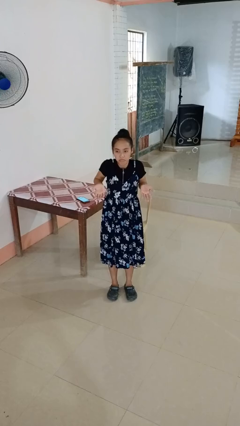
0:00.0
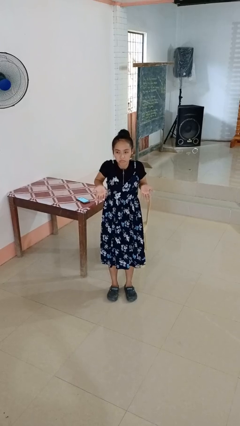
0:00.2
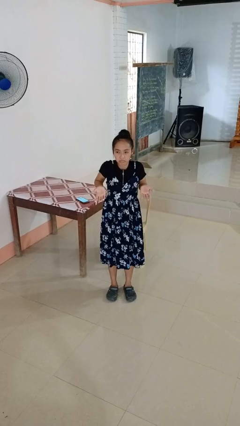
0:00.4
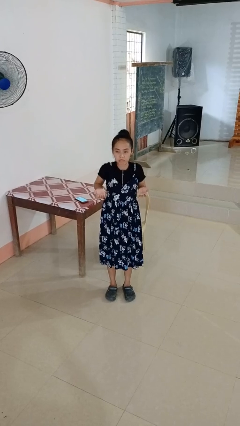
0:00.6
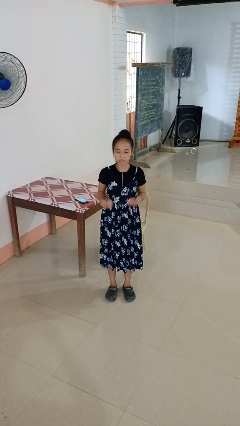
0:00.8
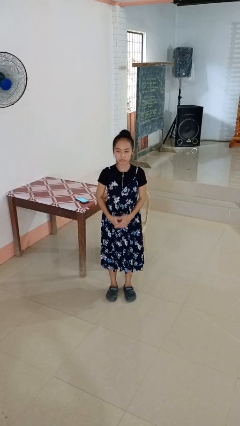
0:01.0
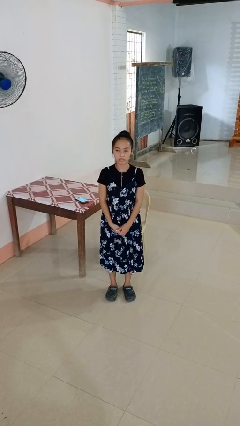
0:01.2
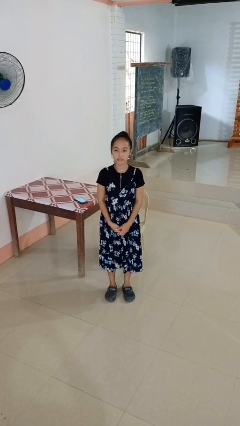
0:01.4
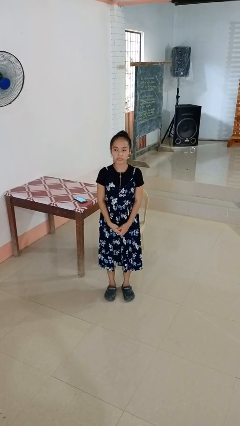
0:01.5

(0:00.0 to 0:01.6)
person shrugs

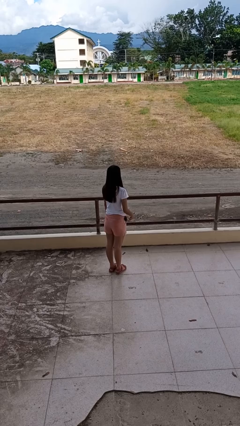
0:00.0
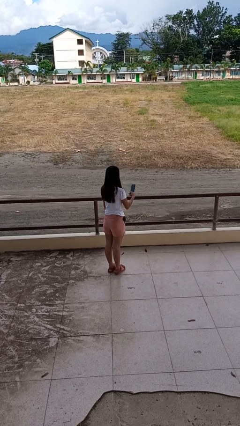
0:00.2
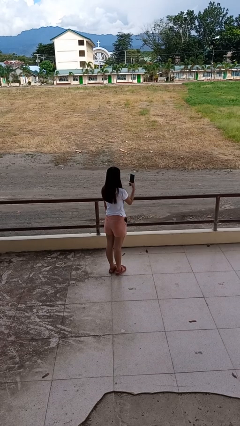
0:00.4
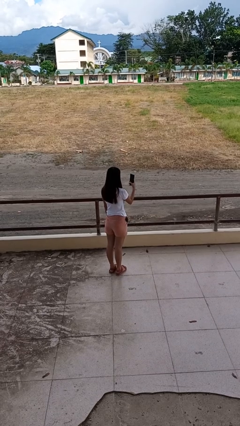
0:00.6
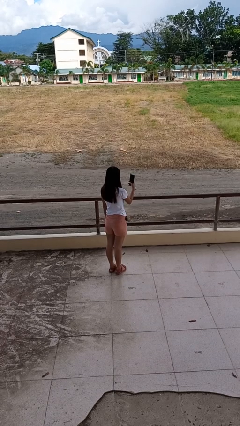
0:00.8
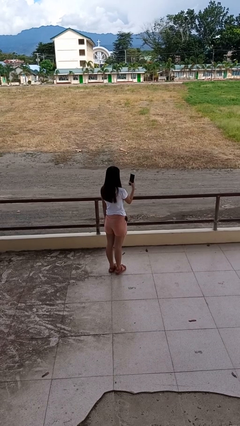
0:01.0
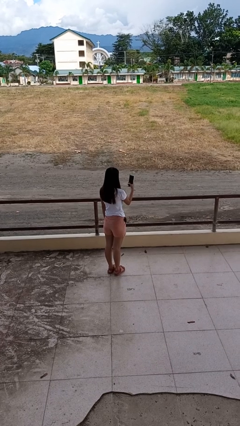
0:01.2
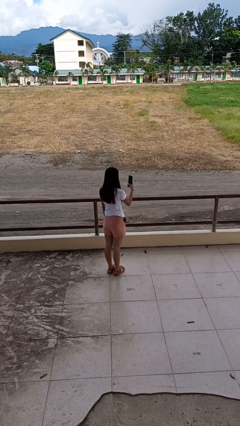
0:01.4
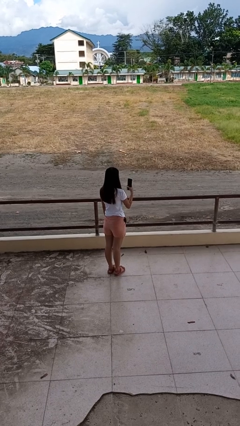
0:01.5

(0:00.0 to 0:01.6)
person takes selfie

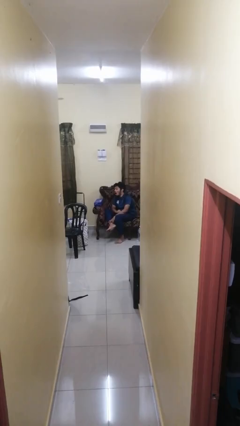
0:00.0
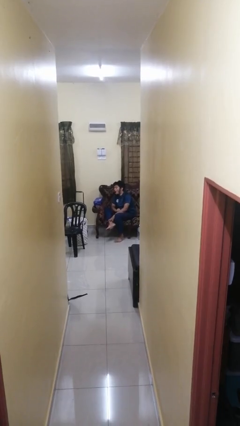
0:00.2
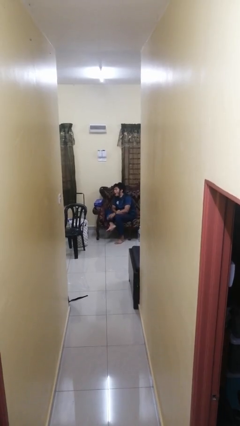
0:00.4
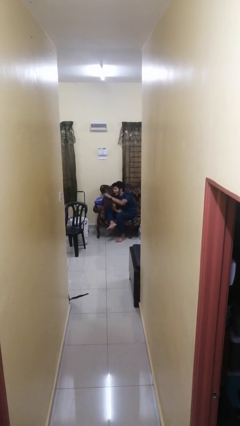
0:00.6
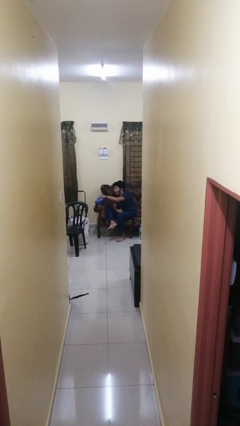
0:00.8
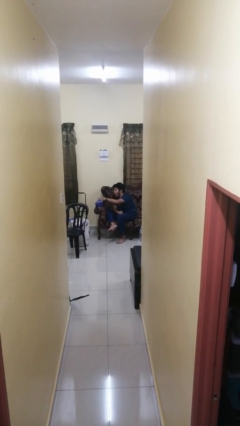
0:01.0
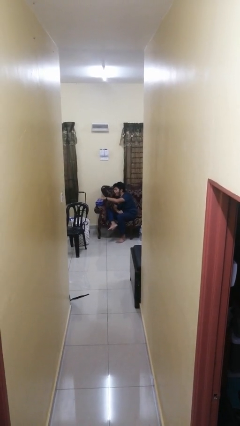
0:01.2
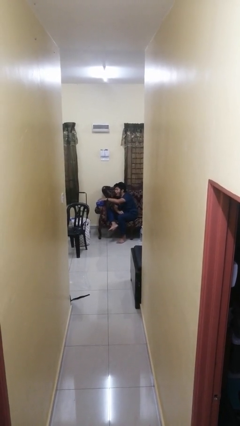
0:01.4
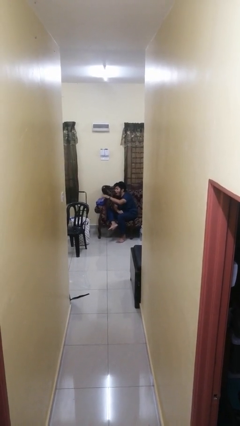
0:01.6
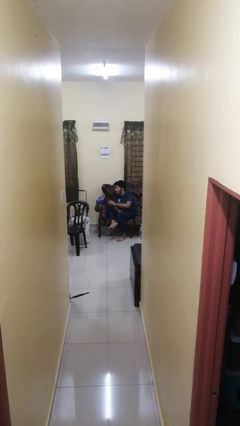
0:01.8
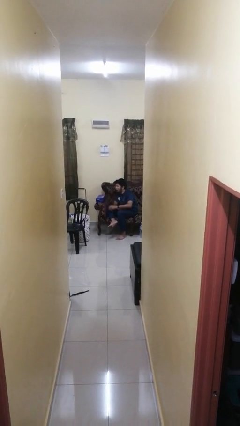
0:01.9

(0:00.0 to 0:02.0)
person taps object with finger

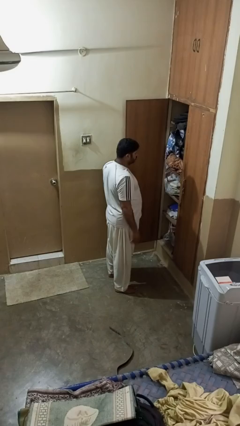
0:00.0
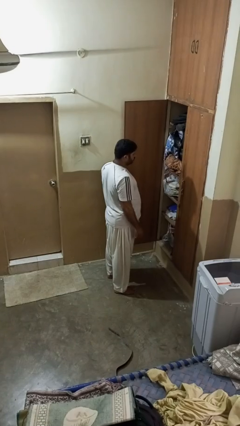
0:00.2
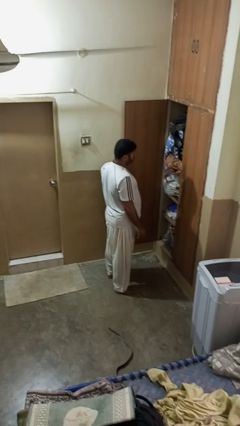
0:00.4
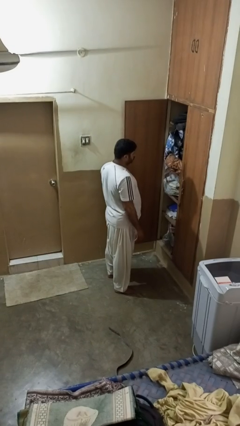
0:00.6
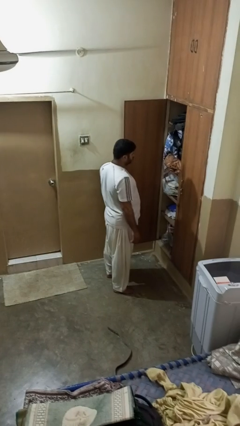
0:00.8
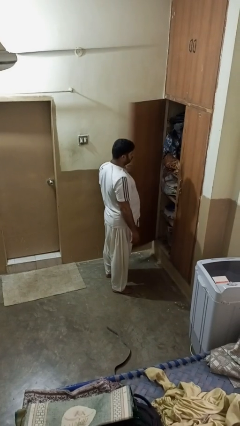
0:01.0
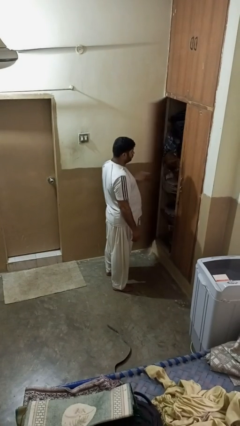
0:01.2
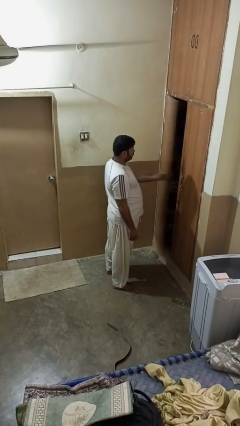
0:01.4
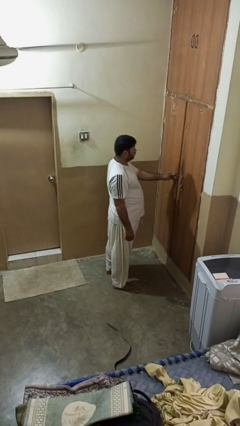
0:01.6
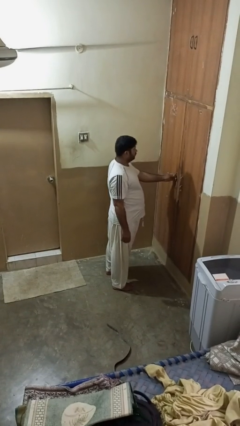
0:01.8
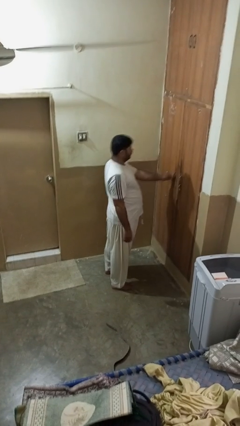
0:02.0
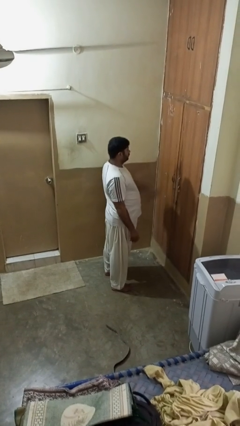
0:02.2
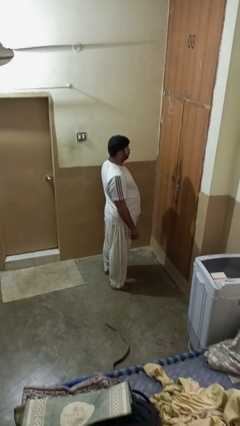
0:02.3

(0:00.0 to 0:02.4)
person closes closet door

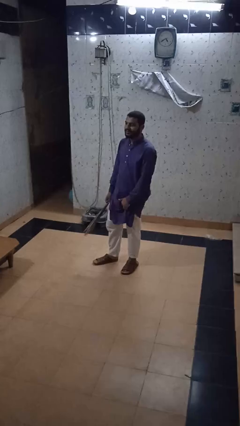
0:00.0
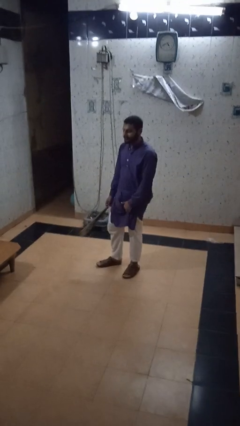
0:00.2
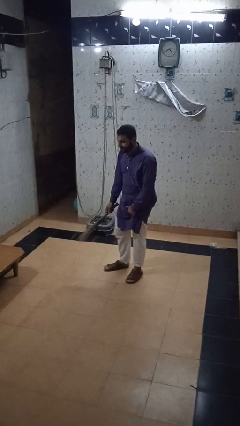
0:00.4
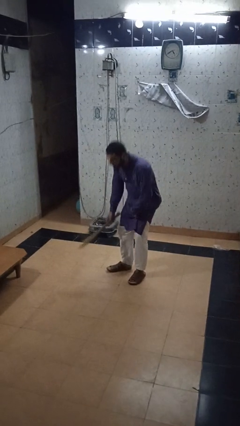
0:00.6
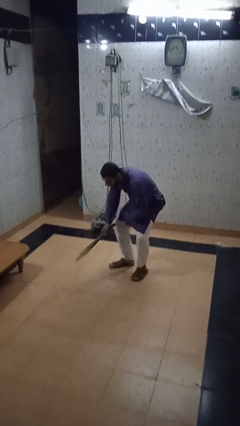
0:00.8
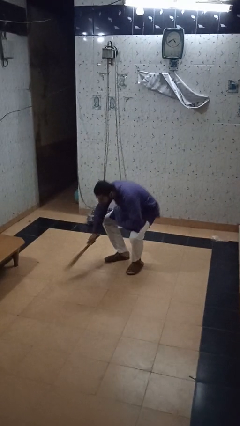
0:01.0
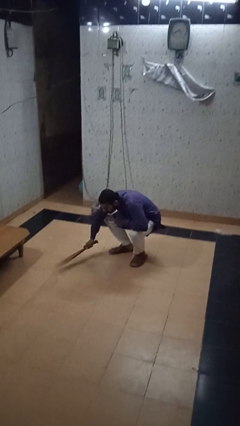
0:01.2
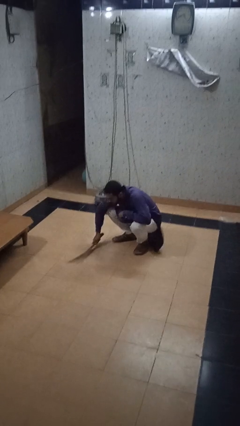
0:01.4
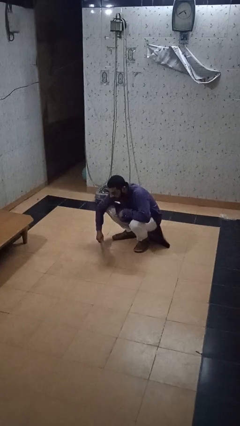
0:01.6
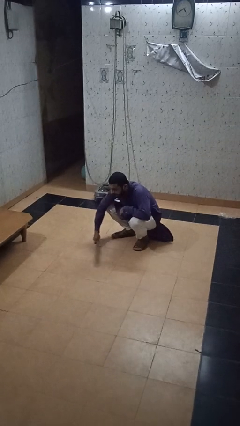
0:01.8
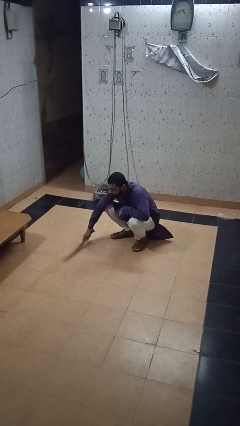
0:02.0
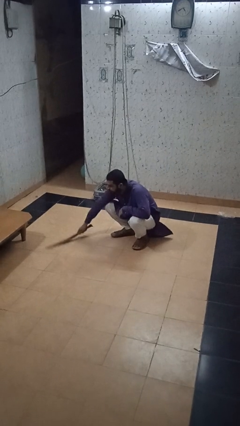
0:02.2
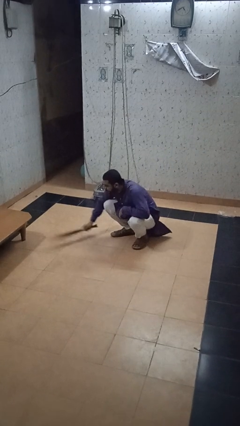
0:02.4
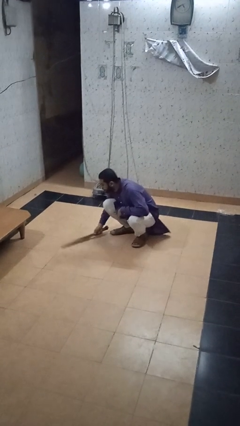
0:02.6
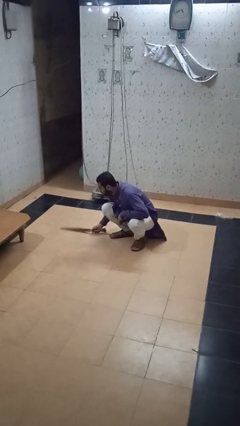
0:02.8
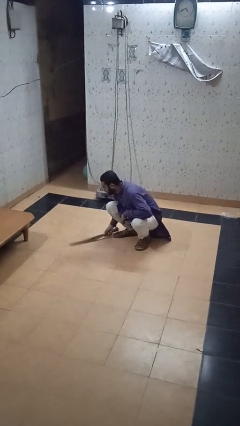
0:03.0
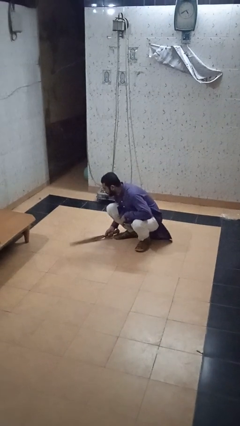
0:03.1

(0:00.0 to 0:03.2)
person sweeps floor

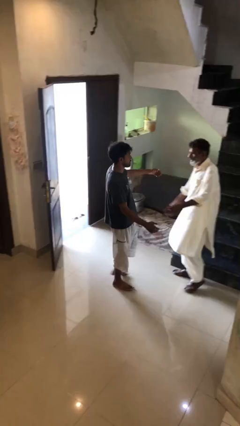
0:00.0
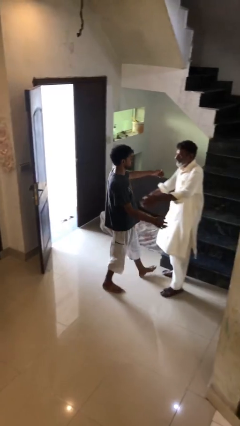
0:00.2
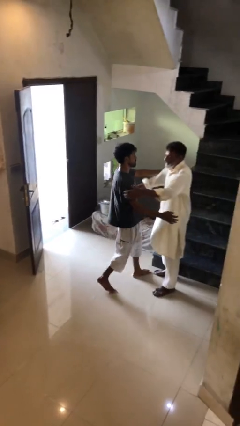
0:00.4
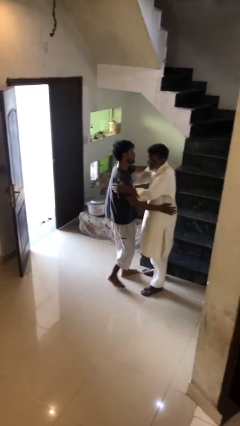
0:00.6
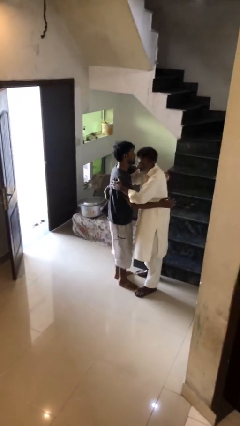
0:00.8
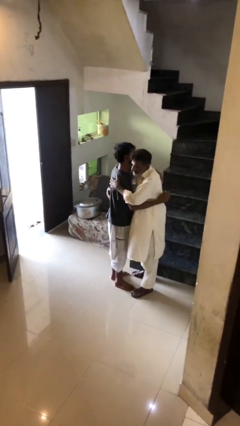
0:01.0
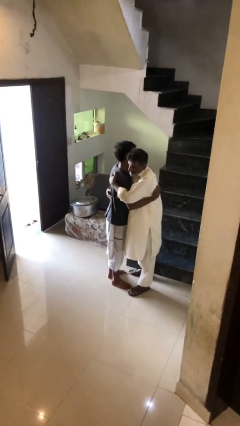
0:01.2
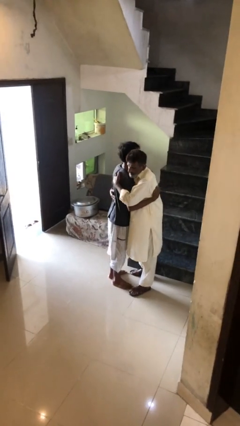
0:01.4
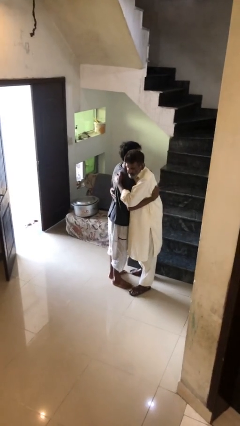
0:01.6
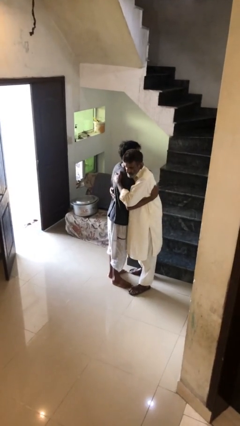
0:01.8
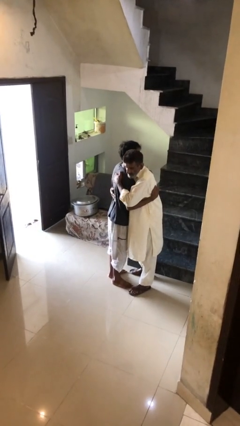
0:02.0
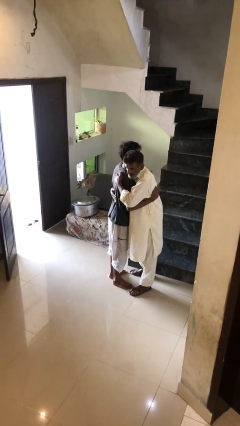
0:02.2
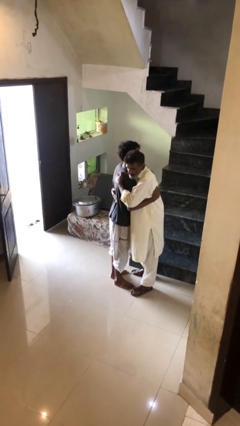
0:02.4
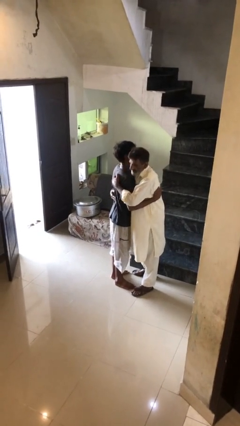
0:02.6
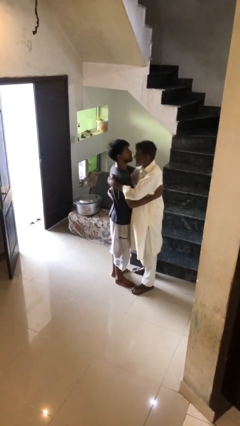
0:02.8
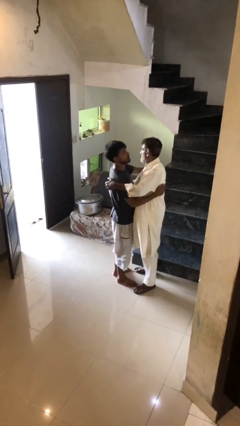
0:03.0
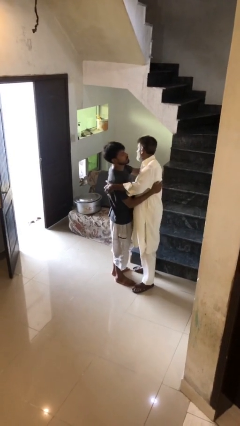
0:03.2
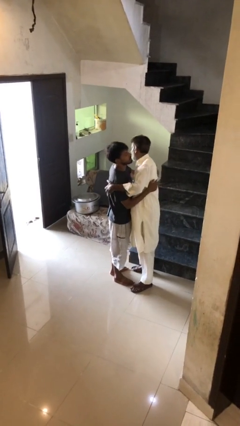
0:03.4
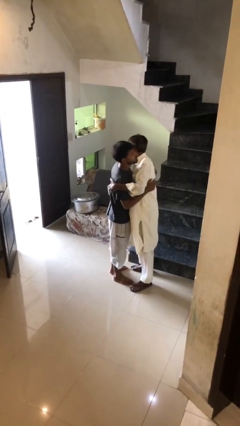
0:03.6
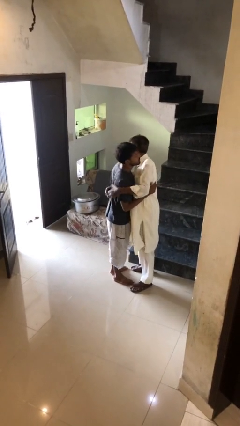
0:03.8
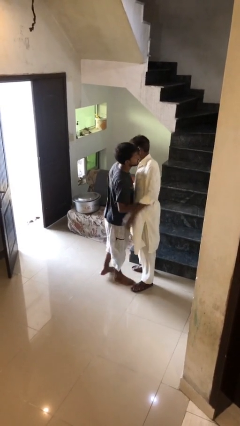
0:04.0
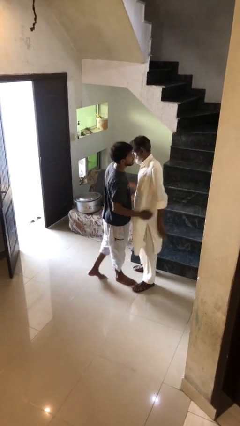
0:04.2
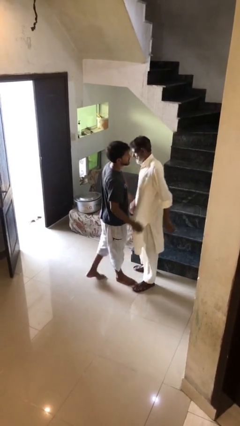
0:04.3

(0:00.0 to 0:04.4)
person embraces person

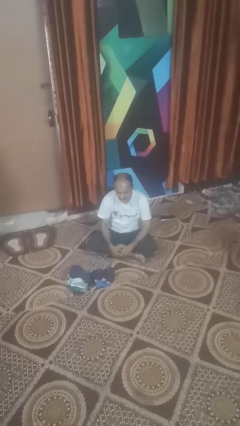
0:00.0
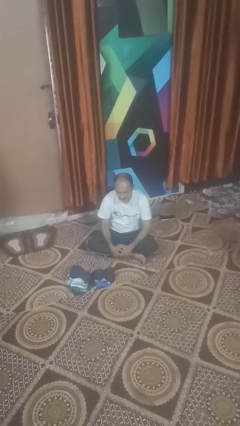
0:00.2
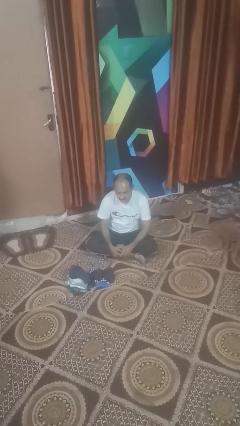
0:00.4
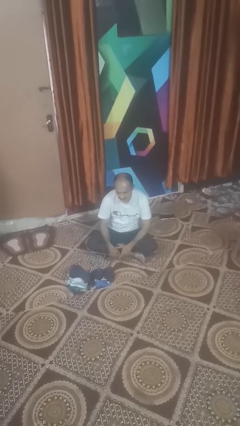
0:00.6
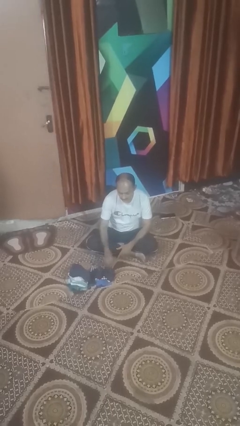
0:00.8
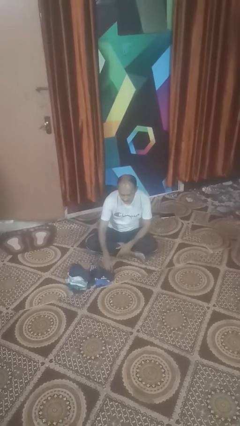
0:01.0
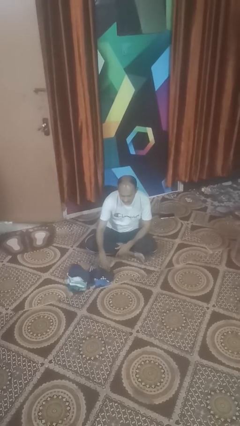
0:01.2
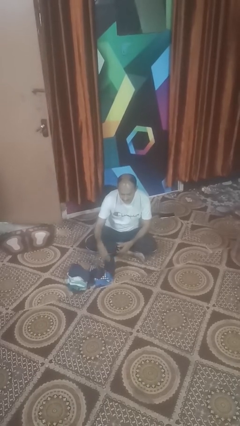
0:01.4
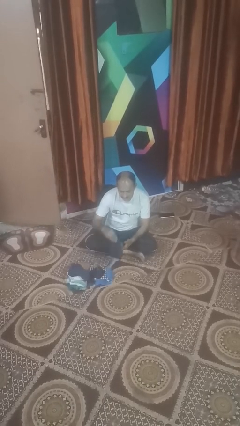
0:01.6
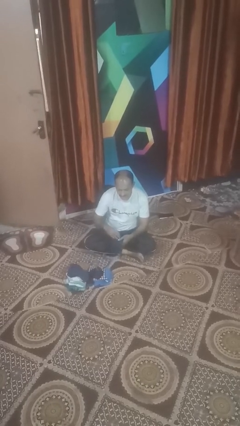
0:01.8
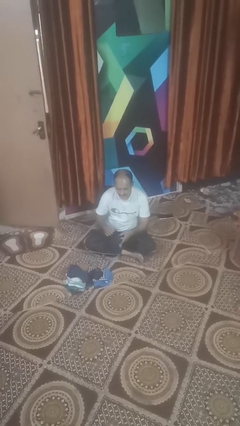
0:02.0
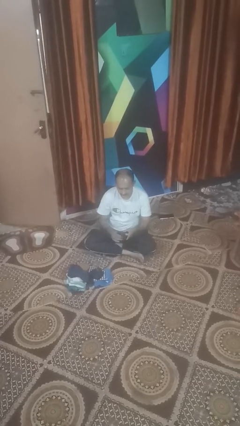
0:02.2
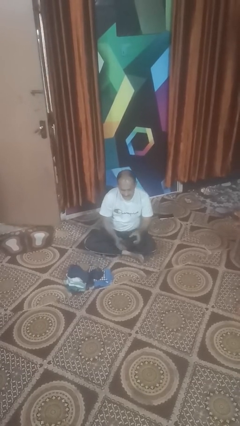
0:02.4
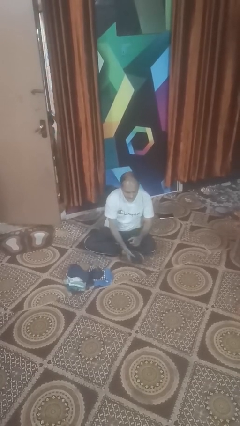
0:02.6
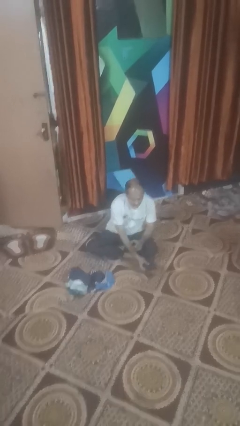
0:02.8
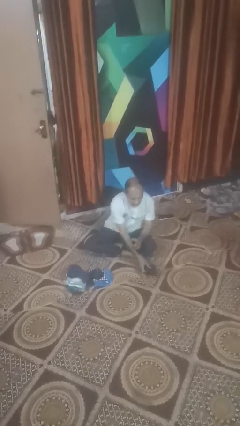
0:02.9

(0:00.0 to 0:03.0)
person folds socks
